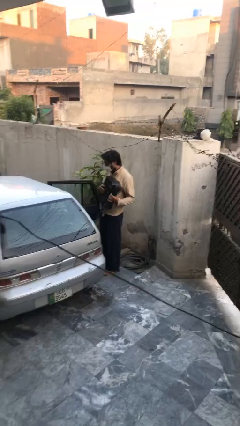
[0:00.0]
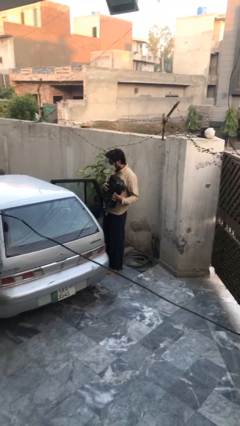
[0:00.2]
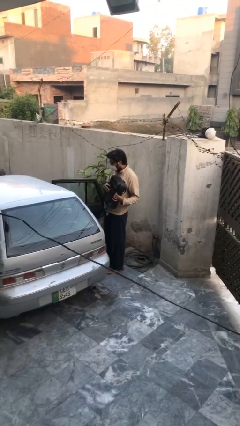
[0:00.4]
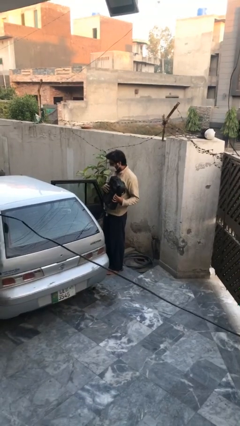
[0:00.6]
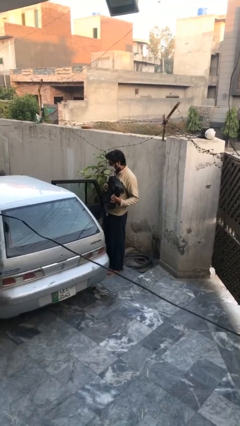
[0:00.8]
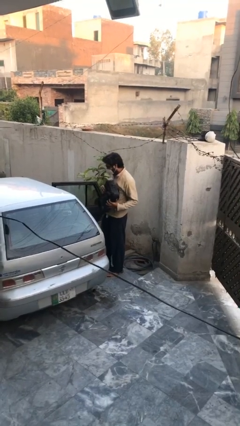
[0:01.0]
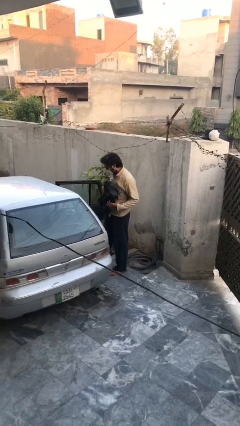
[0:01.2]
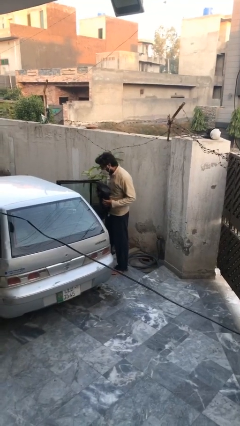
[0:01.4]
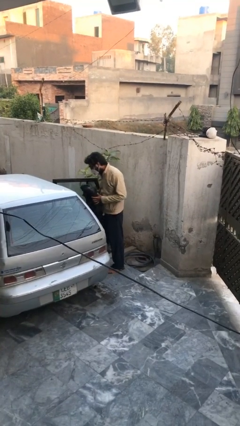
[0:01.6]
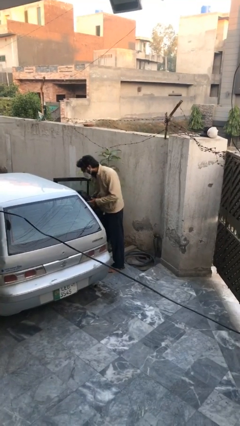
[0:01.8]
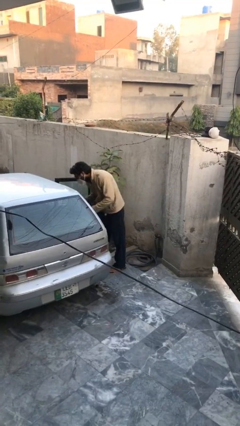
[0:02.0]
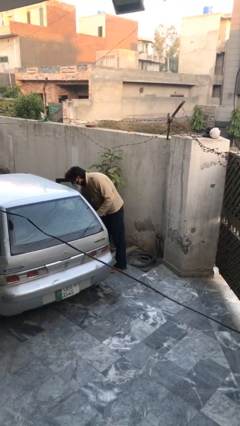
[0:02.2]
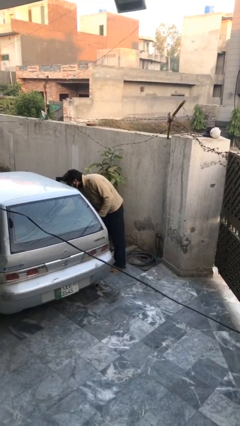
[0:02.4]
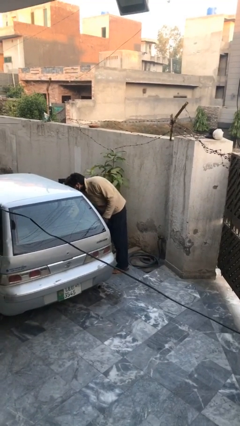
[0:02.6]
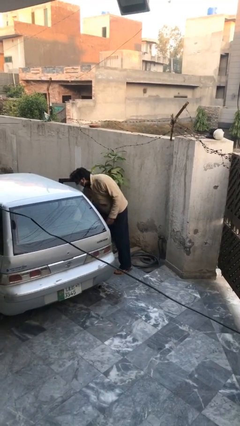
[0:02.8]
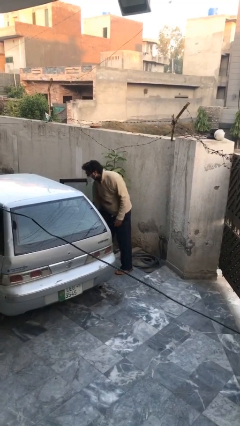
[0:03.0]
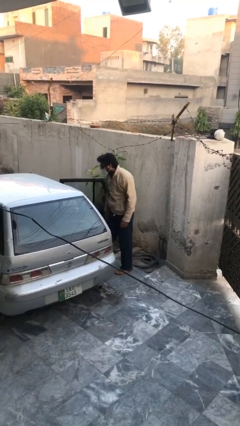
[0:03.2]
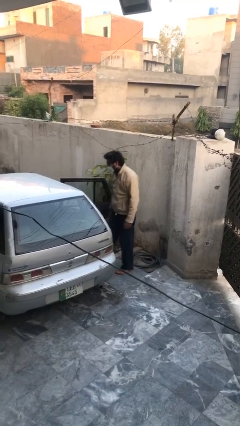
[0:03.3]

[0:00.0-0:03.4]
person loads car

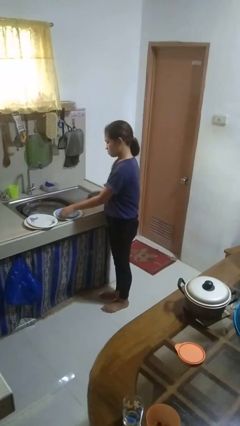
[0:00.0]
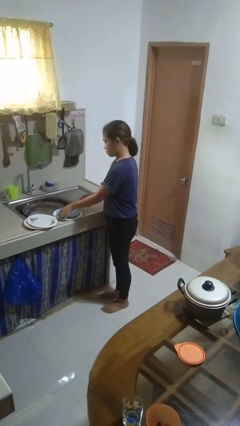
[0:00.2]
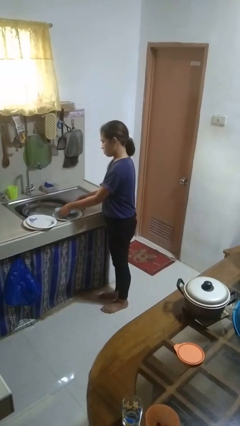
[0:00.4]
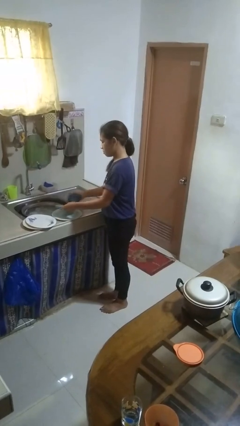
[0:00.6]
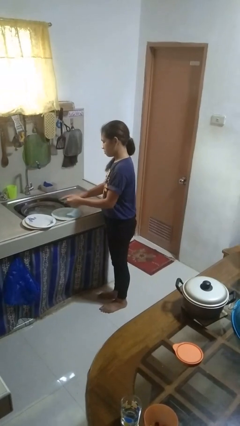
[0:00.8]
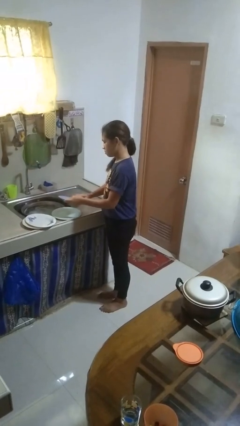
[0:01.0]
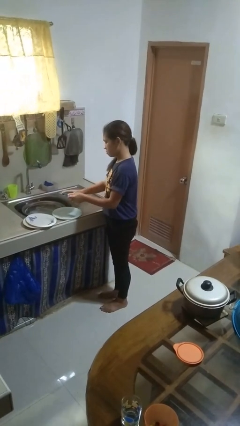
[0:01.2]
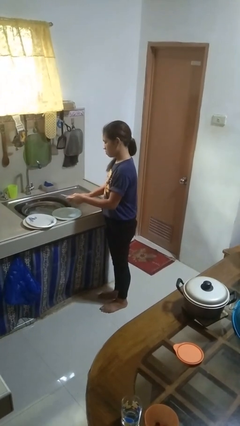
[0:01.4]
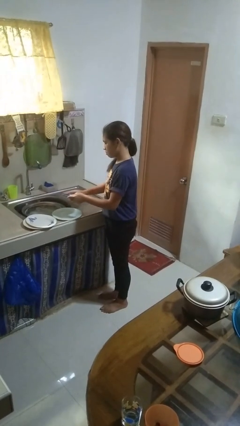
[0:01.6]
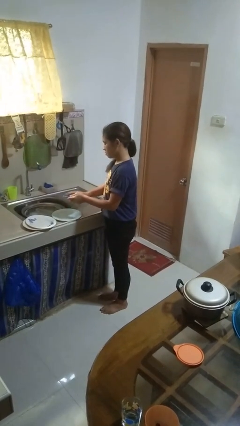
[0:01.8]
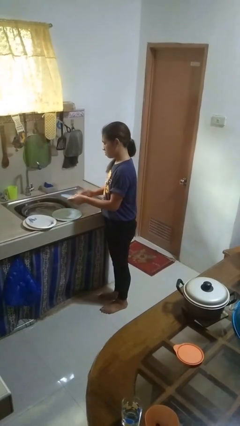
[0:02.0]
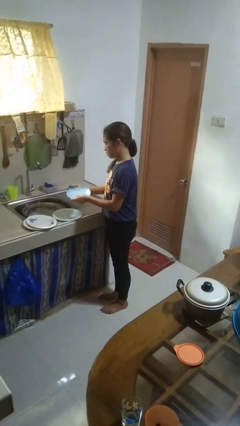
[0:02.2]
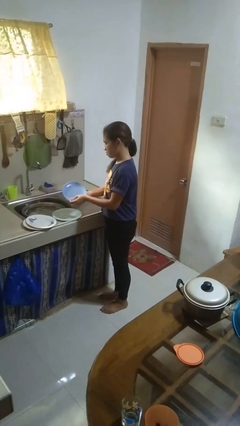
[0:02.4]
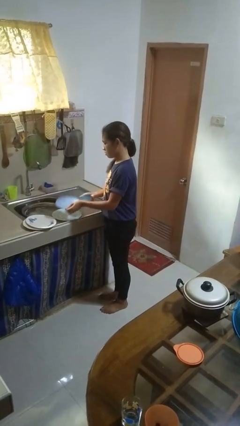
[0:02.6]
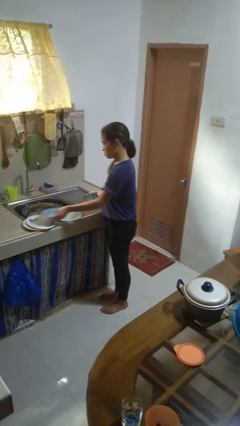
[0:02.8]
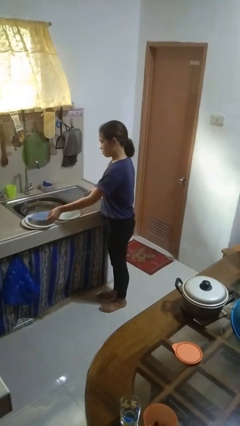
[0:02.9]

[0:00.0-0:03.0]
person dries dish

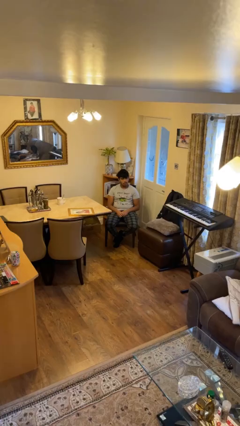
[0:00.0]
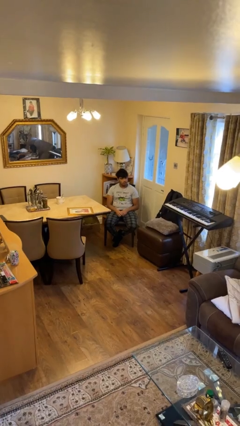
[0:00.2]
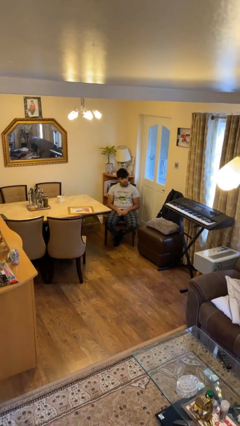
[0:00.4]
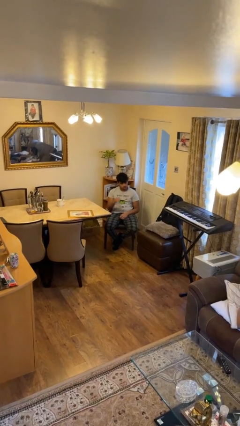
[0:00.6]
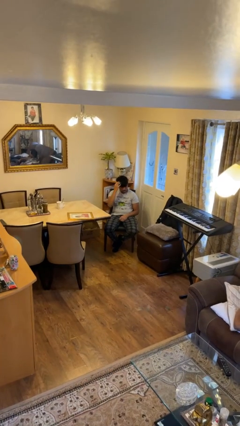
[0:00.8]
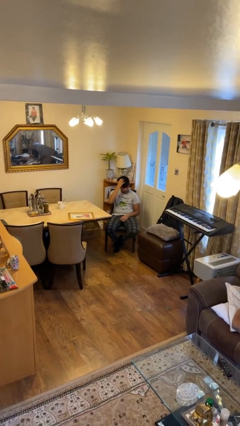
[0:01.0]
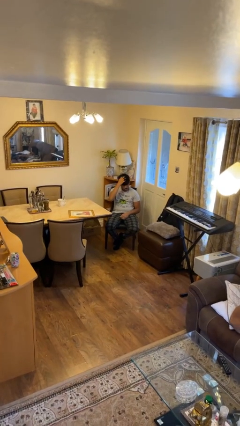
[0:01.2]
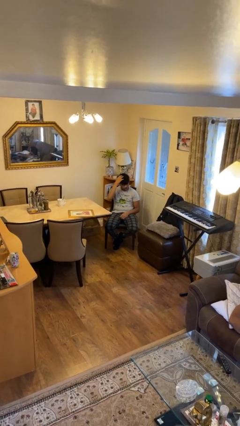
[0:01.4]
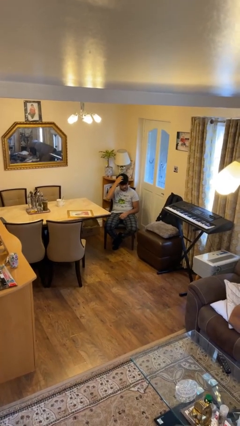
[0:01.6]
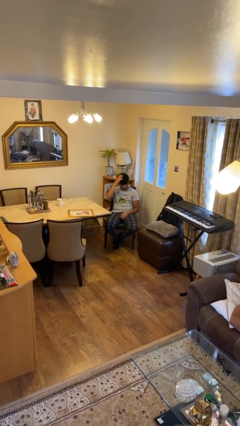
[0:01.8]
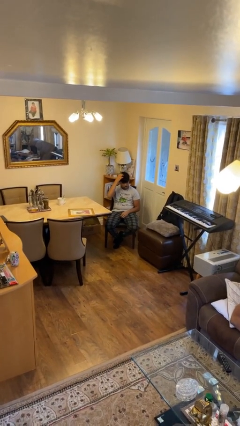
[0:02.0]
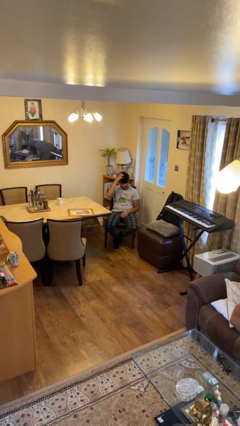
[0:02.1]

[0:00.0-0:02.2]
person strokes hair

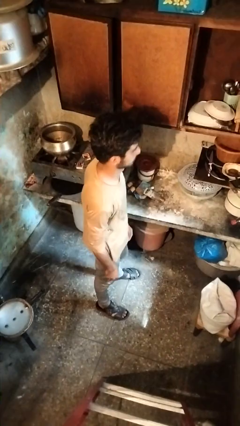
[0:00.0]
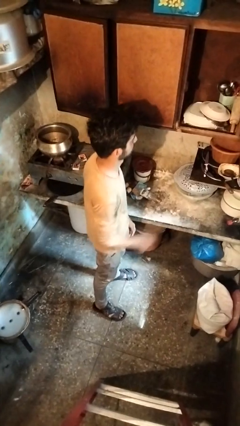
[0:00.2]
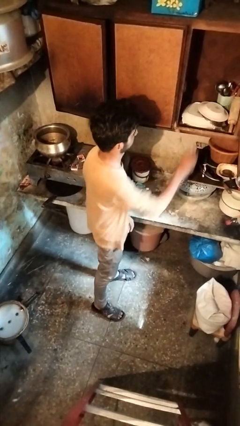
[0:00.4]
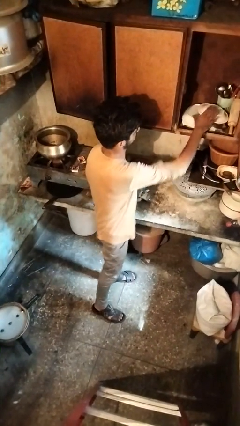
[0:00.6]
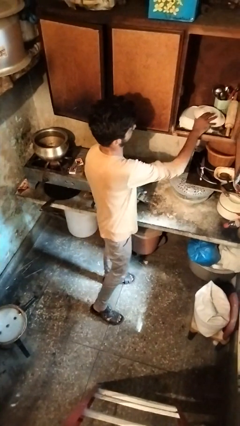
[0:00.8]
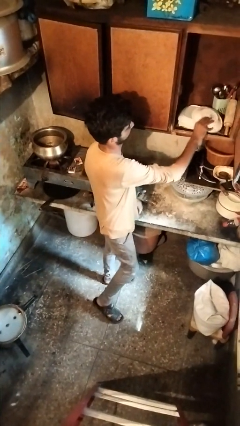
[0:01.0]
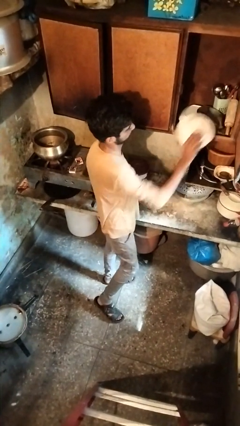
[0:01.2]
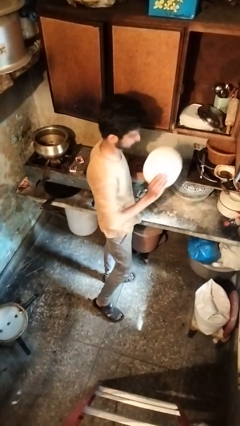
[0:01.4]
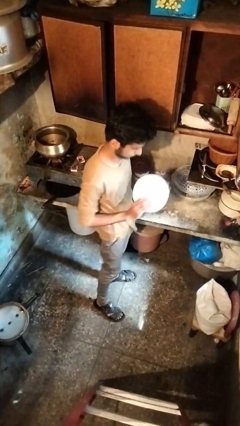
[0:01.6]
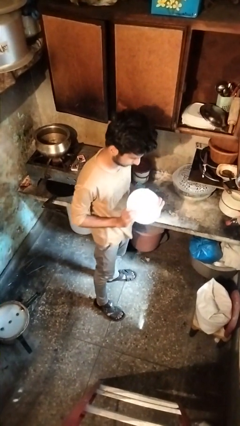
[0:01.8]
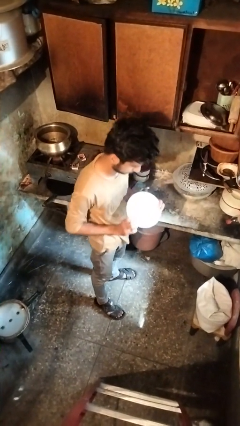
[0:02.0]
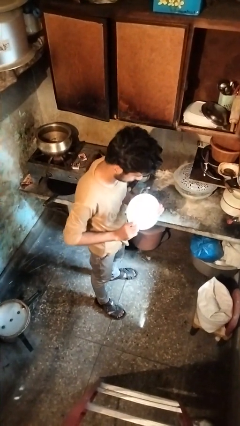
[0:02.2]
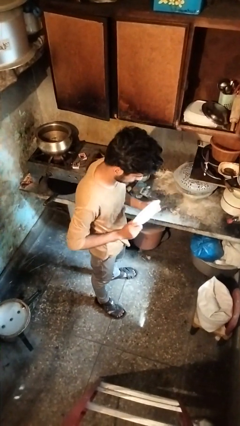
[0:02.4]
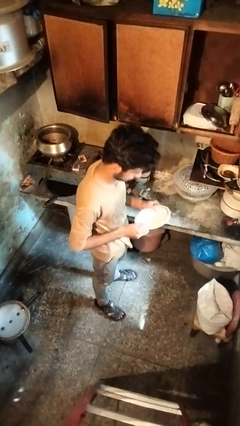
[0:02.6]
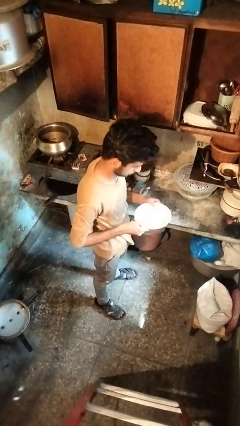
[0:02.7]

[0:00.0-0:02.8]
person picks up object from cabinet

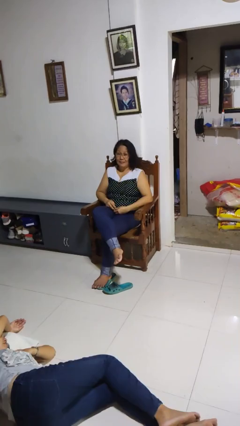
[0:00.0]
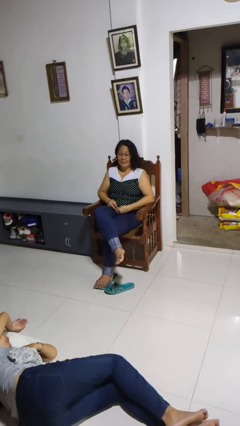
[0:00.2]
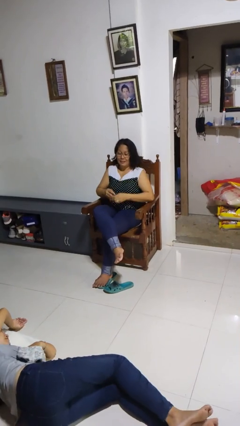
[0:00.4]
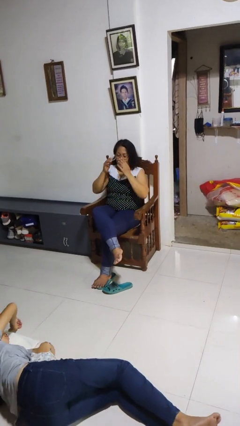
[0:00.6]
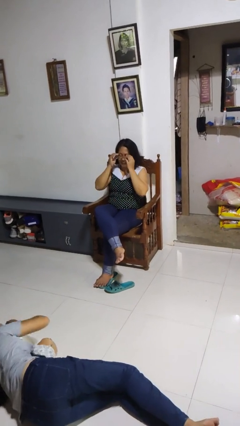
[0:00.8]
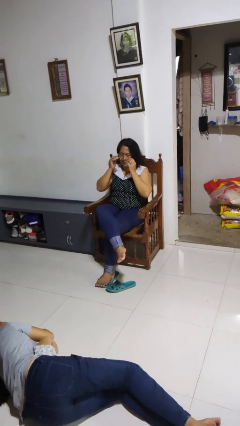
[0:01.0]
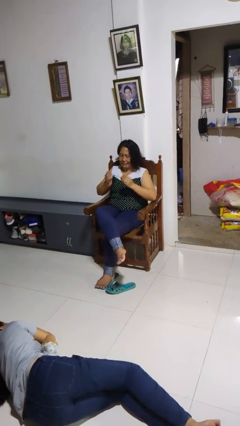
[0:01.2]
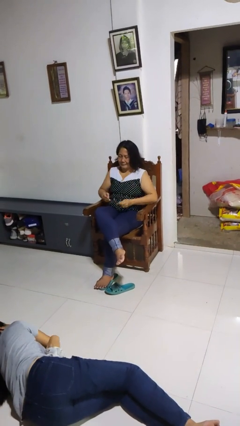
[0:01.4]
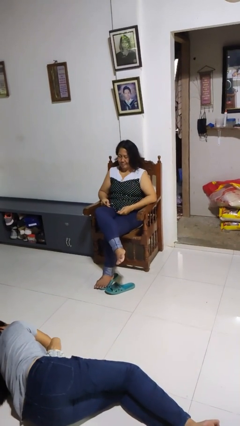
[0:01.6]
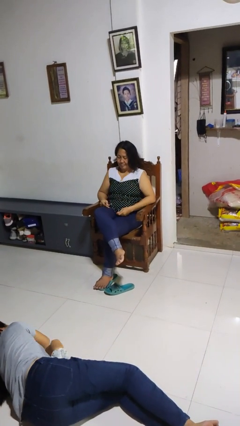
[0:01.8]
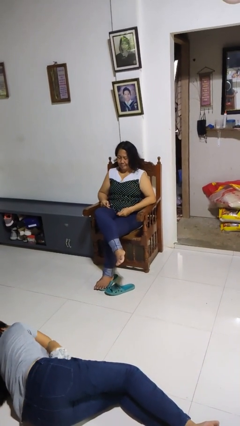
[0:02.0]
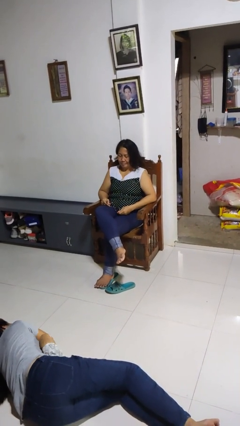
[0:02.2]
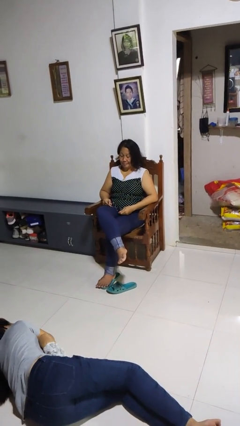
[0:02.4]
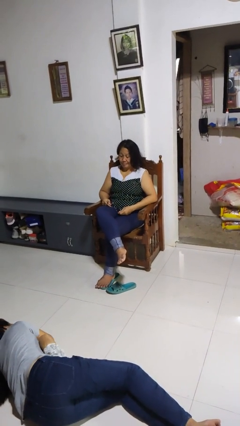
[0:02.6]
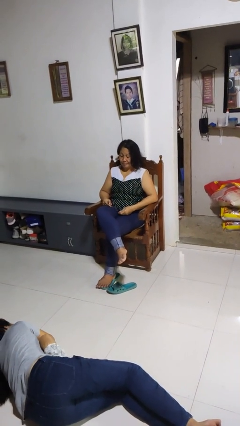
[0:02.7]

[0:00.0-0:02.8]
person takes off glasses

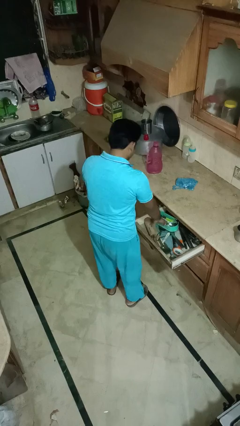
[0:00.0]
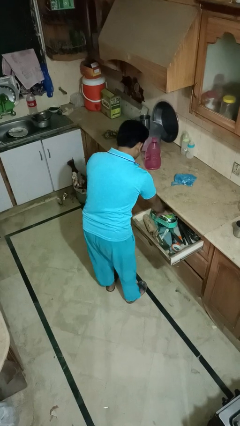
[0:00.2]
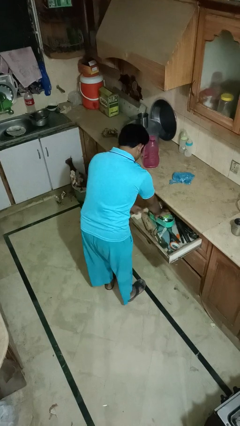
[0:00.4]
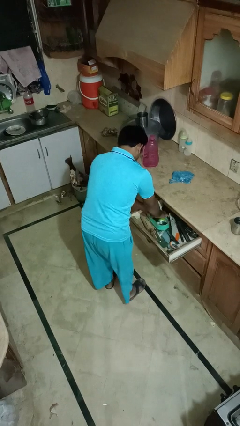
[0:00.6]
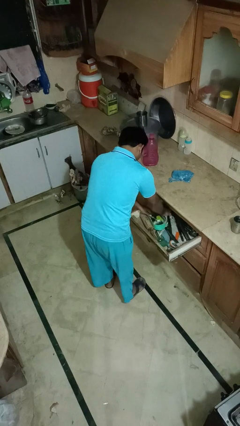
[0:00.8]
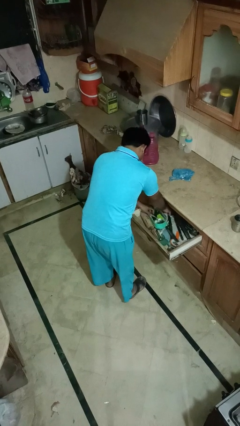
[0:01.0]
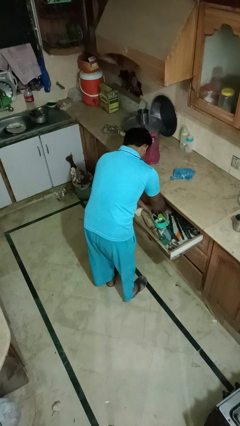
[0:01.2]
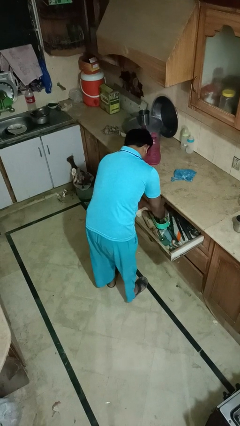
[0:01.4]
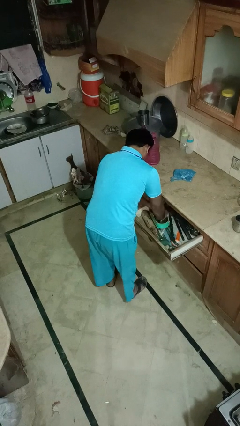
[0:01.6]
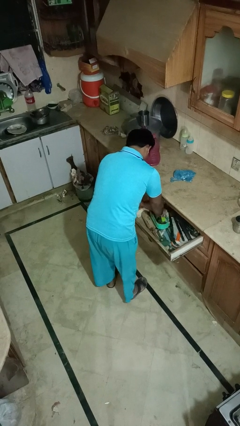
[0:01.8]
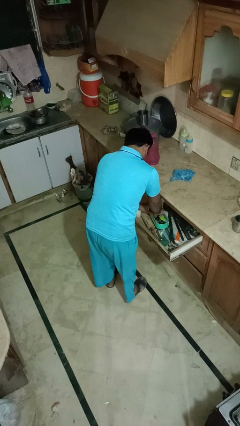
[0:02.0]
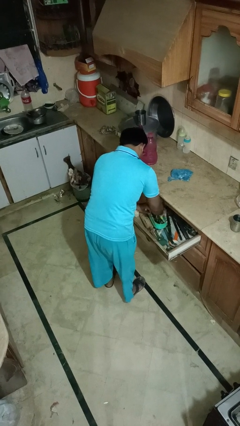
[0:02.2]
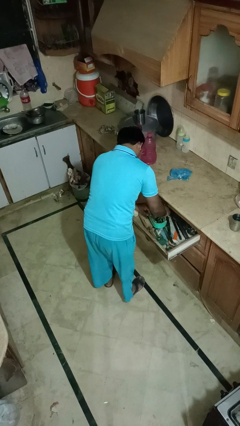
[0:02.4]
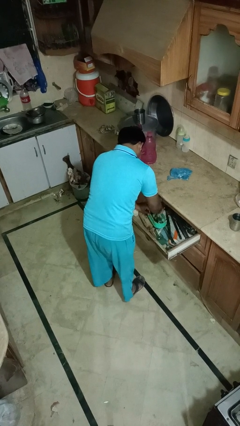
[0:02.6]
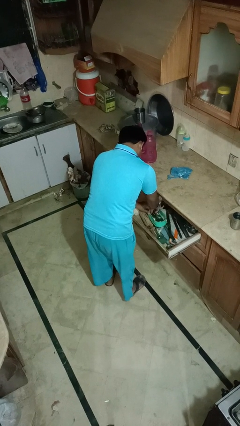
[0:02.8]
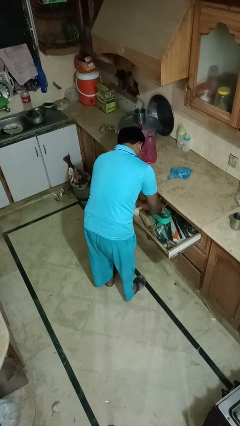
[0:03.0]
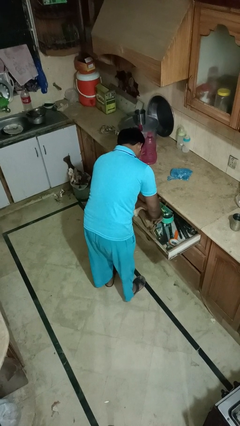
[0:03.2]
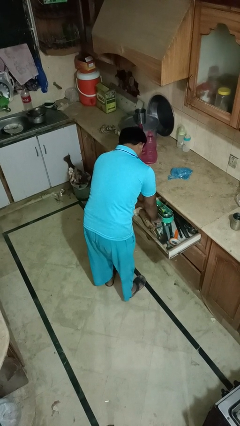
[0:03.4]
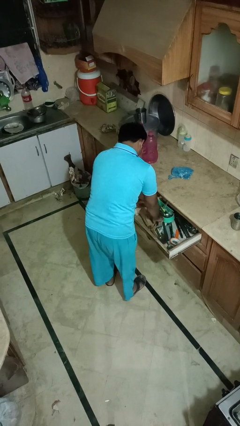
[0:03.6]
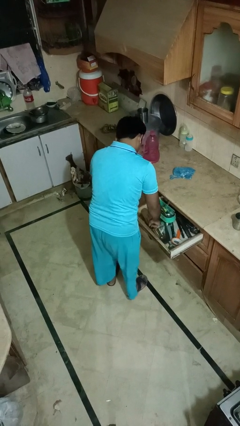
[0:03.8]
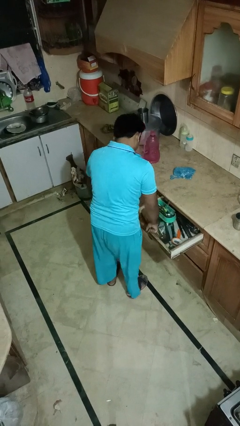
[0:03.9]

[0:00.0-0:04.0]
person searches in kitchen drawer
